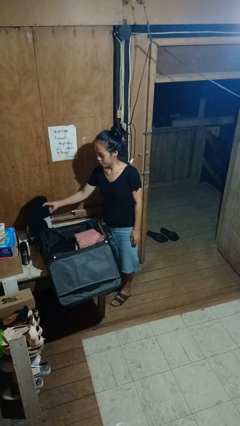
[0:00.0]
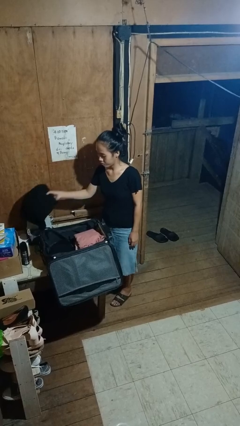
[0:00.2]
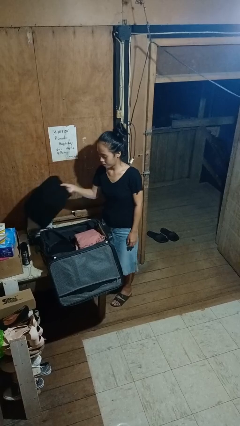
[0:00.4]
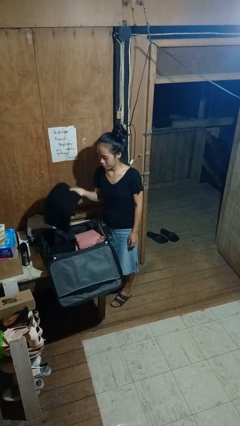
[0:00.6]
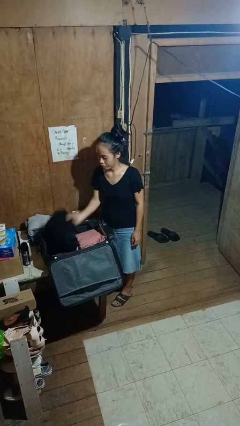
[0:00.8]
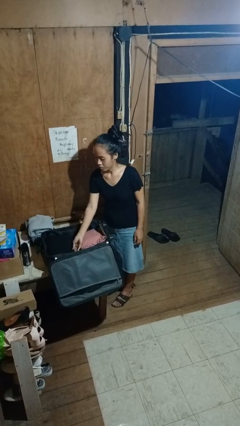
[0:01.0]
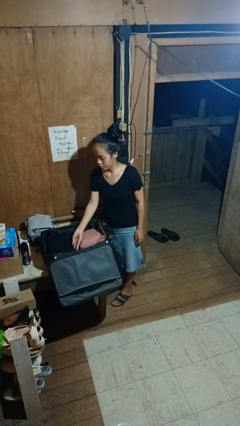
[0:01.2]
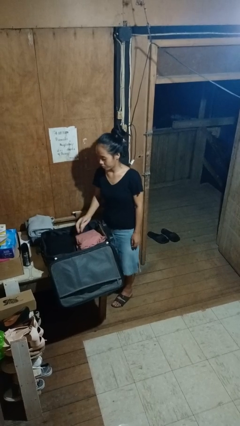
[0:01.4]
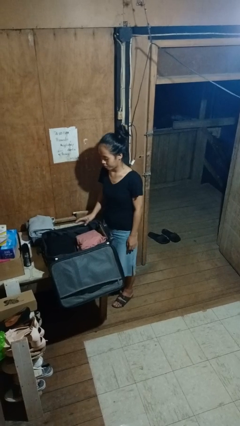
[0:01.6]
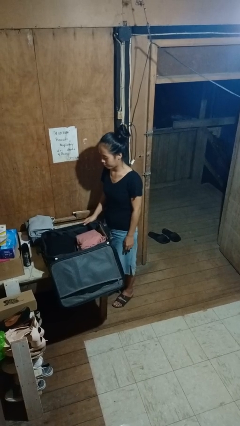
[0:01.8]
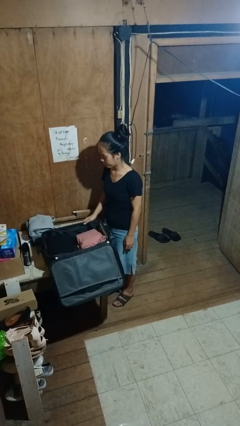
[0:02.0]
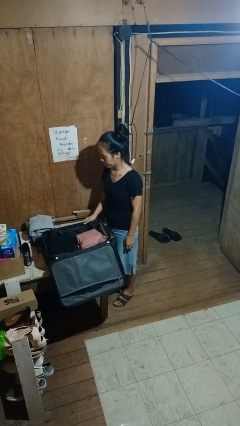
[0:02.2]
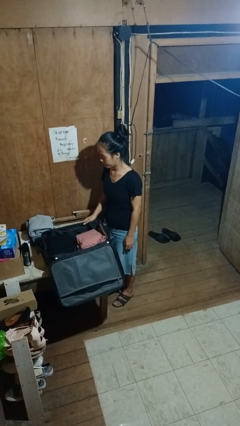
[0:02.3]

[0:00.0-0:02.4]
person loads clothes into suitcase

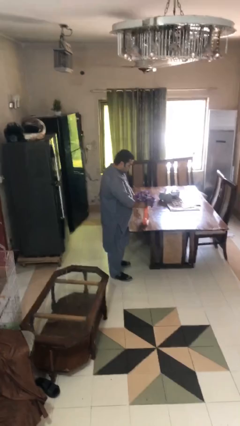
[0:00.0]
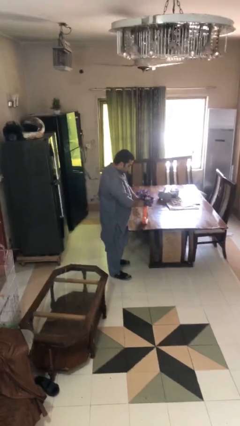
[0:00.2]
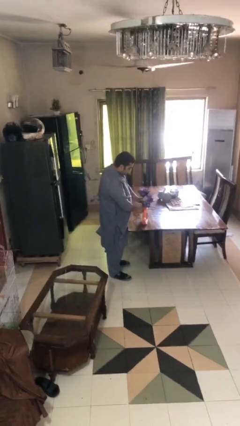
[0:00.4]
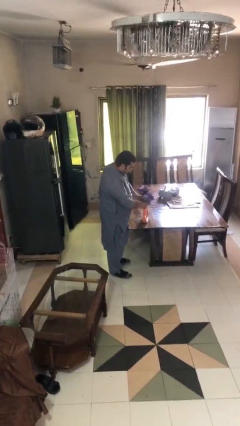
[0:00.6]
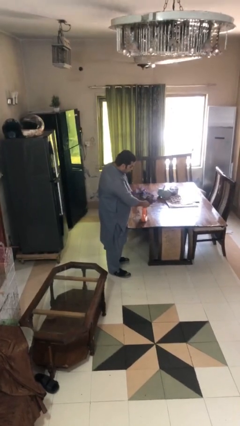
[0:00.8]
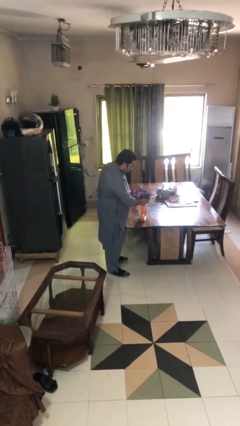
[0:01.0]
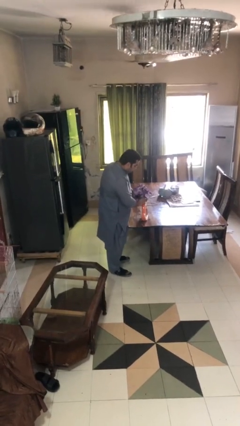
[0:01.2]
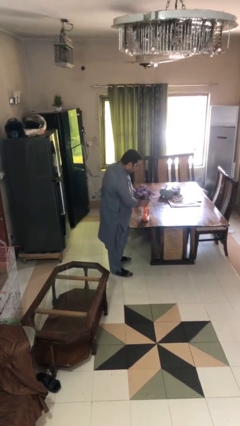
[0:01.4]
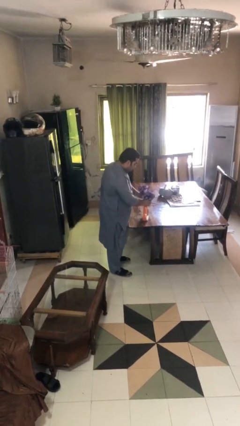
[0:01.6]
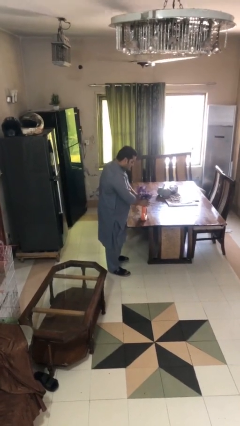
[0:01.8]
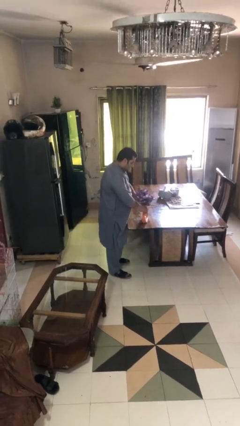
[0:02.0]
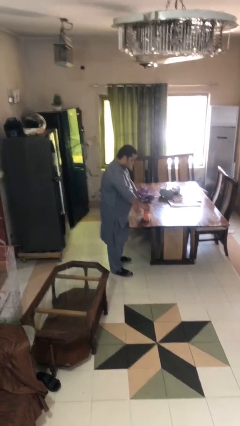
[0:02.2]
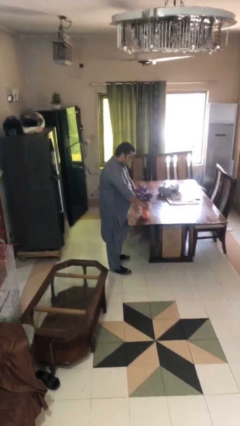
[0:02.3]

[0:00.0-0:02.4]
person arranges flowers in vase

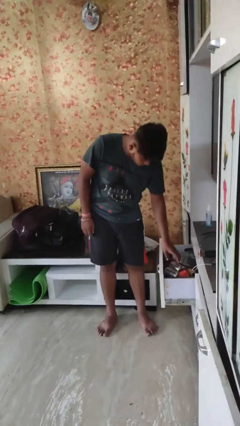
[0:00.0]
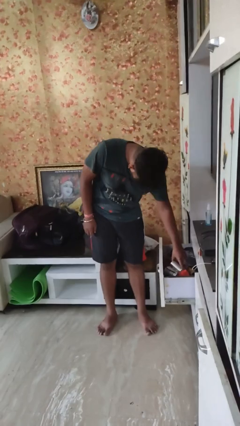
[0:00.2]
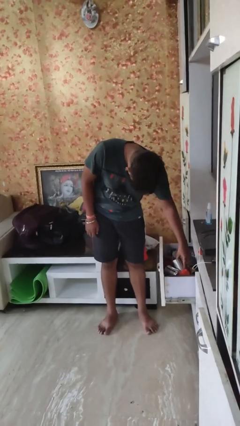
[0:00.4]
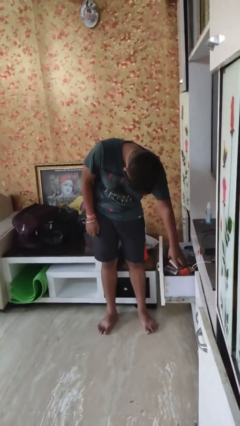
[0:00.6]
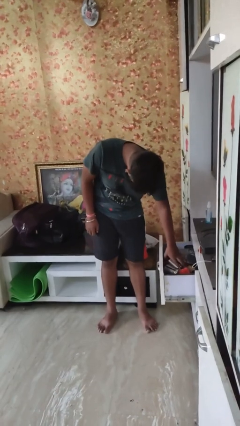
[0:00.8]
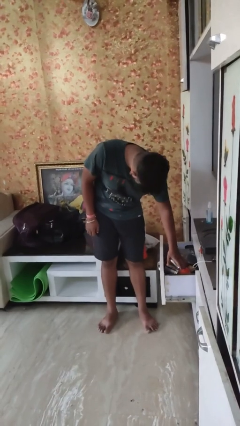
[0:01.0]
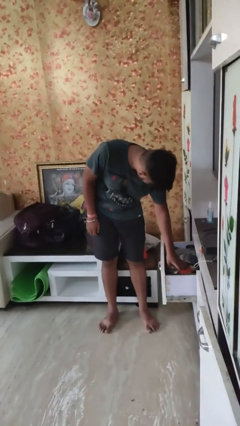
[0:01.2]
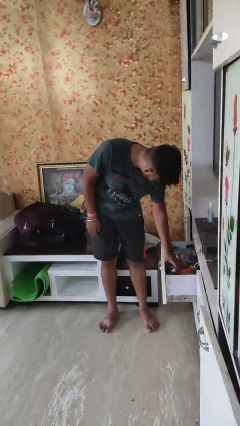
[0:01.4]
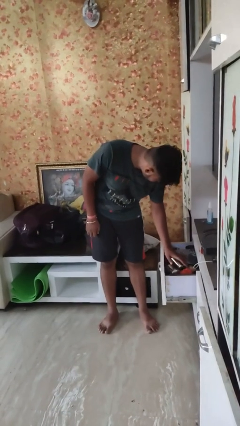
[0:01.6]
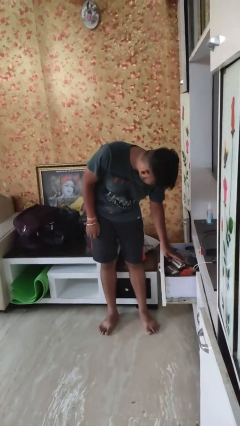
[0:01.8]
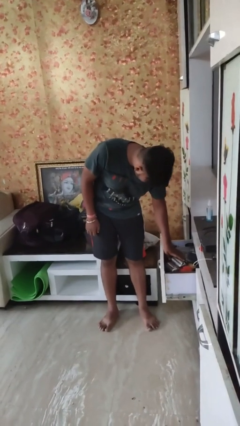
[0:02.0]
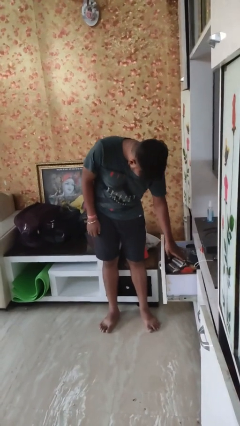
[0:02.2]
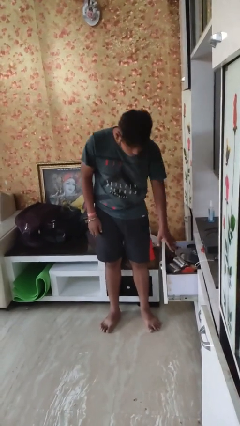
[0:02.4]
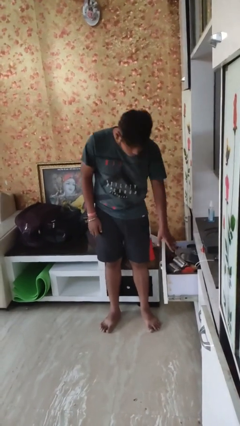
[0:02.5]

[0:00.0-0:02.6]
person searches in kitchen drawer

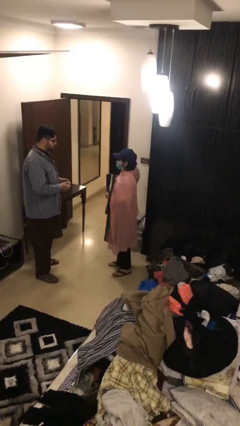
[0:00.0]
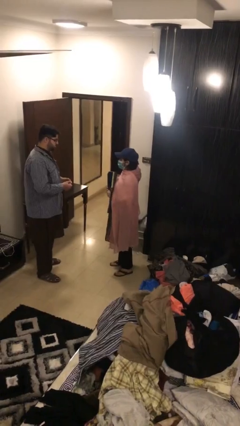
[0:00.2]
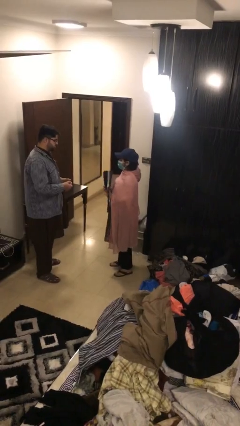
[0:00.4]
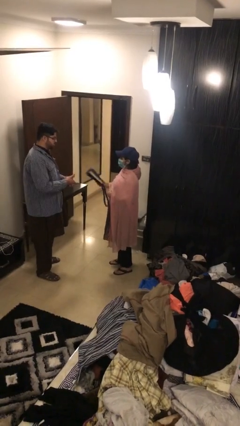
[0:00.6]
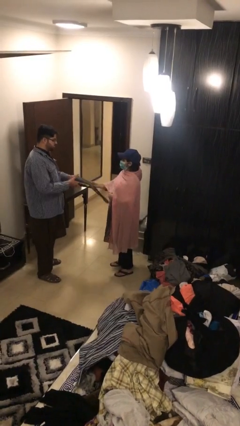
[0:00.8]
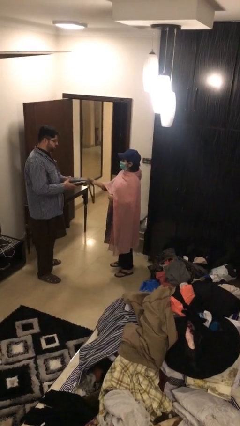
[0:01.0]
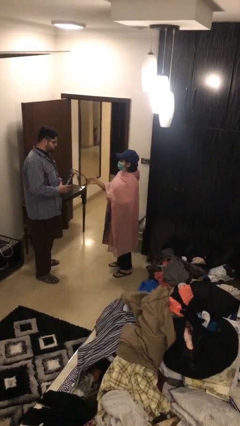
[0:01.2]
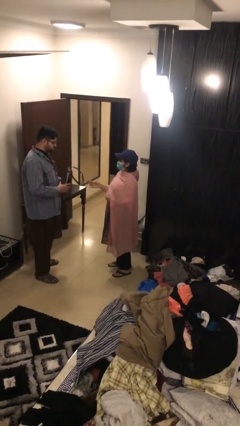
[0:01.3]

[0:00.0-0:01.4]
person transfers object to person

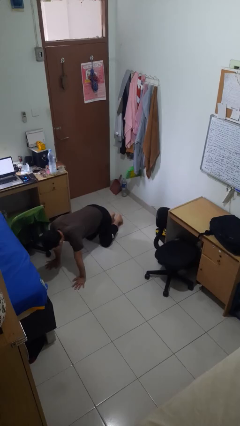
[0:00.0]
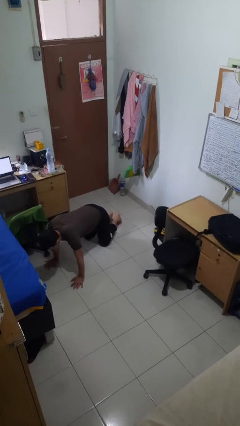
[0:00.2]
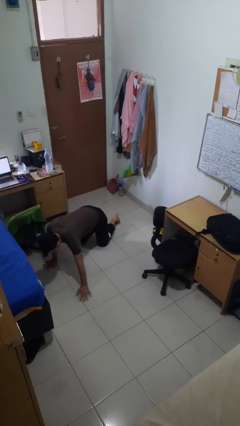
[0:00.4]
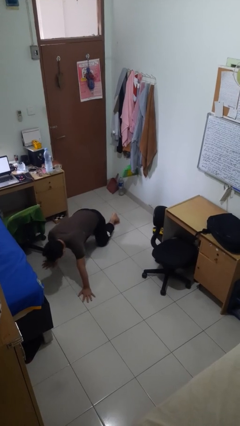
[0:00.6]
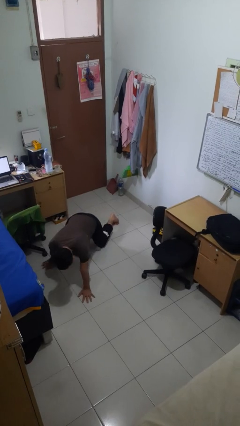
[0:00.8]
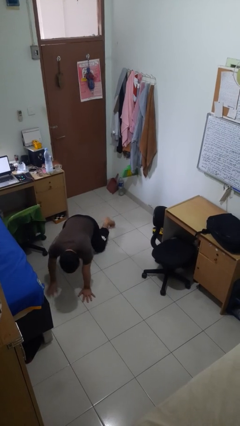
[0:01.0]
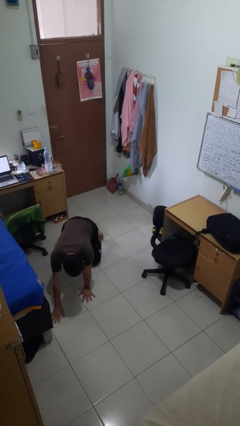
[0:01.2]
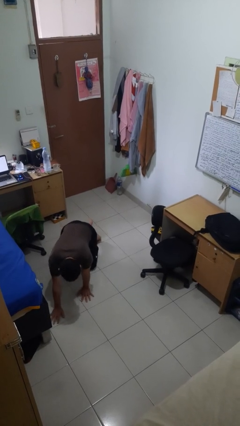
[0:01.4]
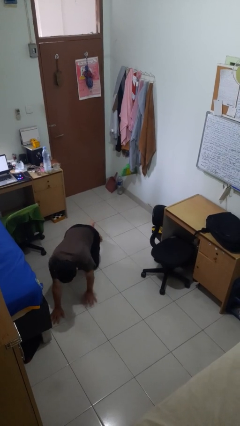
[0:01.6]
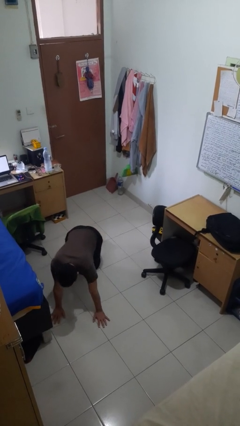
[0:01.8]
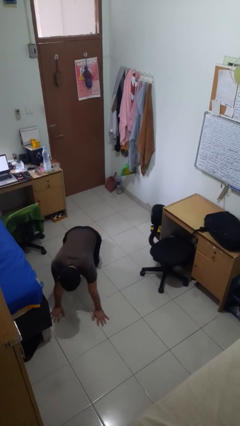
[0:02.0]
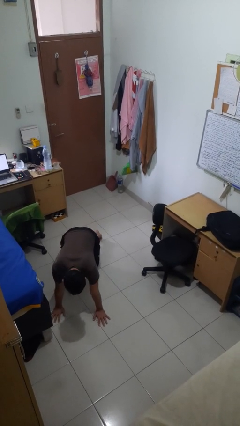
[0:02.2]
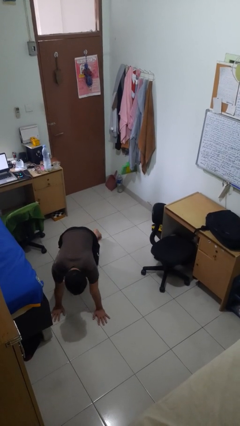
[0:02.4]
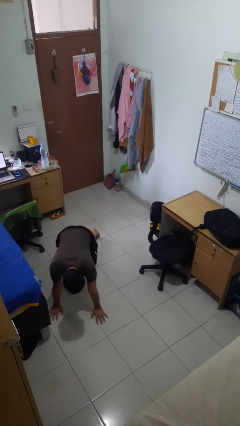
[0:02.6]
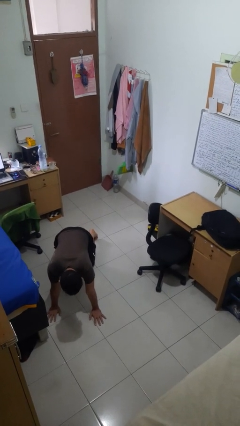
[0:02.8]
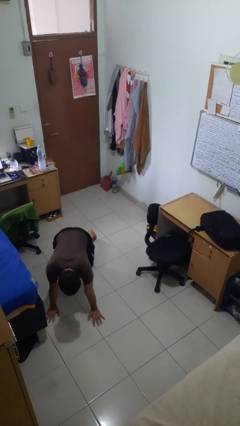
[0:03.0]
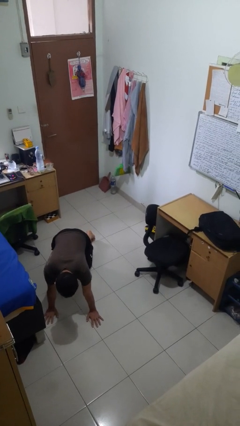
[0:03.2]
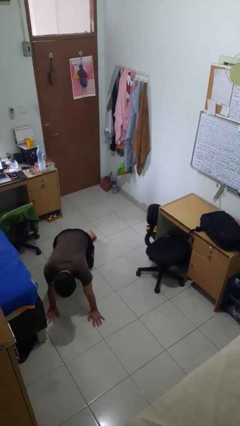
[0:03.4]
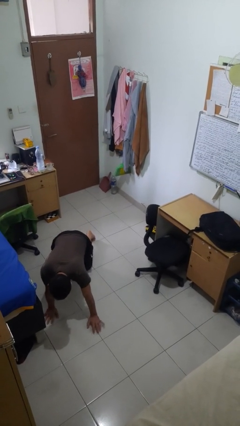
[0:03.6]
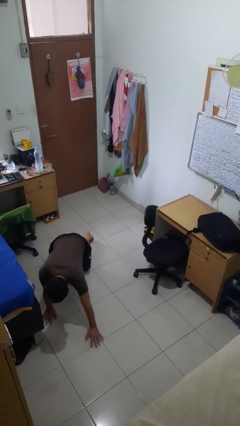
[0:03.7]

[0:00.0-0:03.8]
person crawls

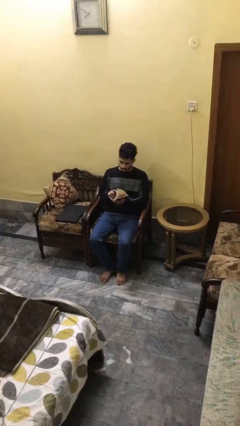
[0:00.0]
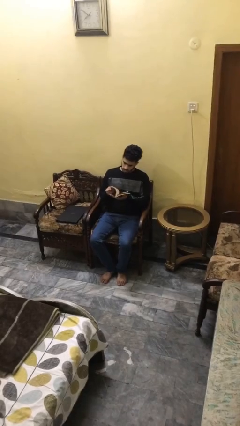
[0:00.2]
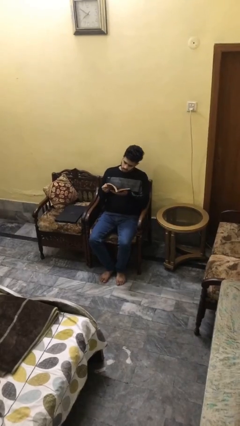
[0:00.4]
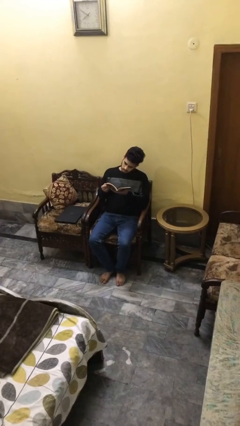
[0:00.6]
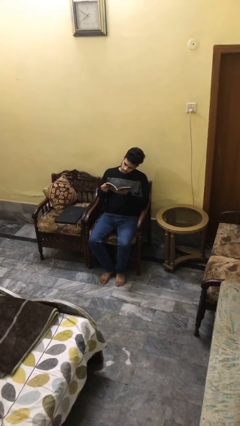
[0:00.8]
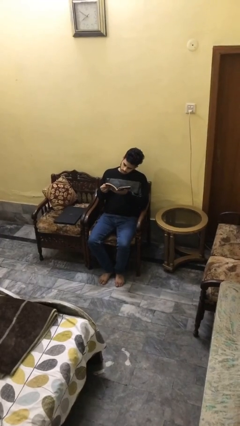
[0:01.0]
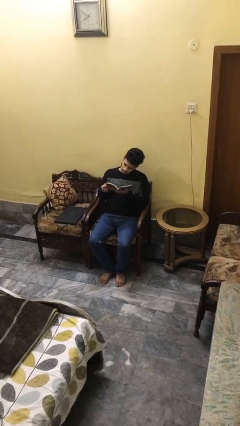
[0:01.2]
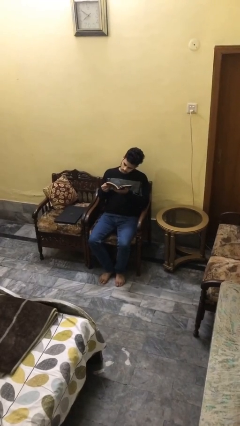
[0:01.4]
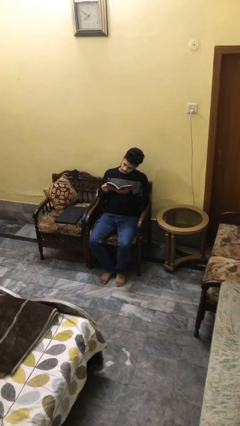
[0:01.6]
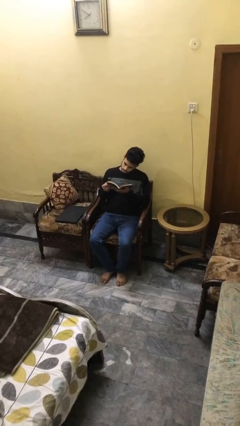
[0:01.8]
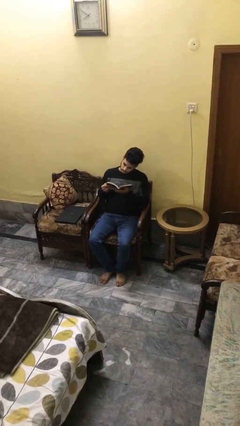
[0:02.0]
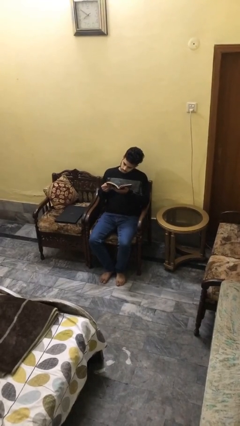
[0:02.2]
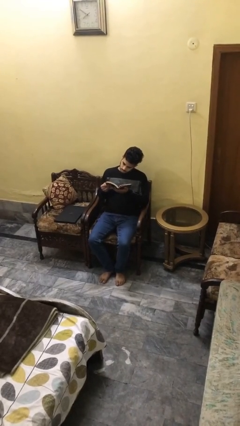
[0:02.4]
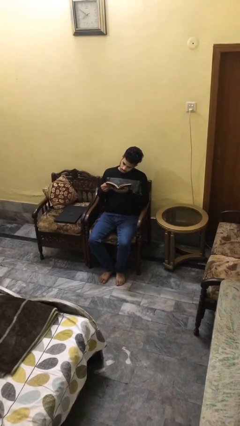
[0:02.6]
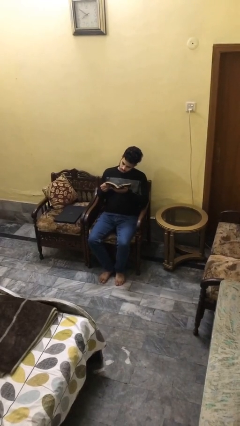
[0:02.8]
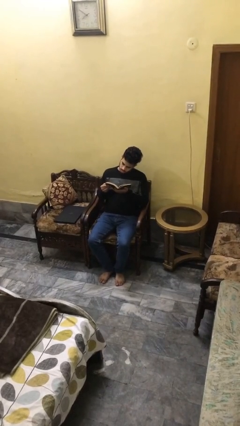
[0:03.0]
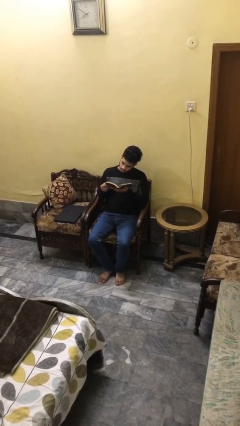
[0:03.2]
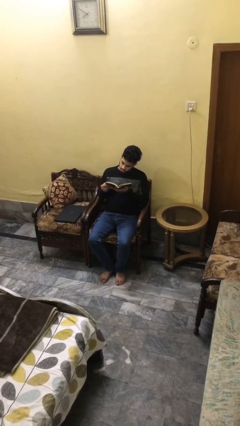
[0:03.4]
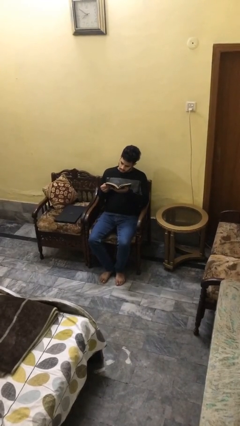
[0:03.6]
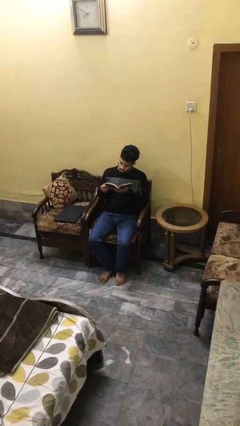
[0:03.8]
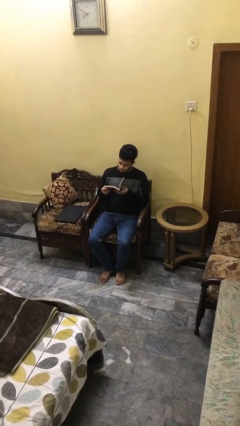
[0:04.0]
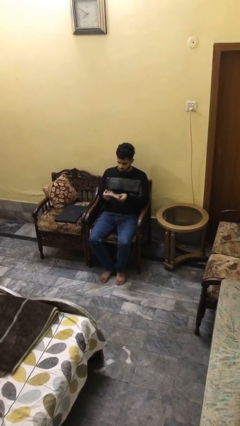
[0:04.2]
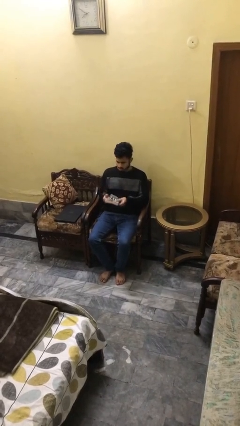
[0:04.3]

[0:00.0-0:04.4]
person reads document

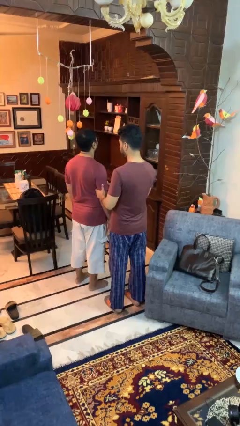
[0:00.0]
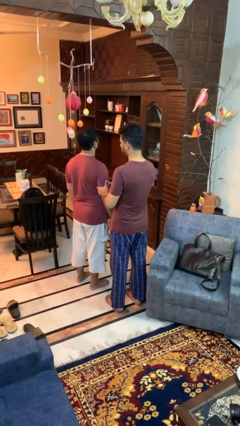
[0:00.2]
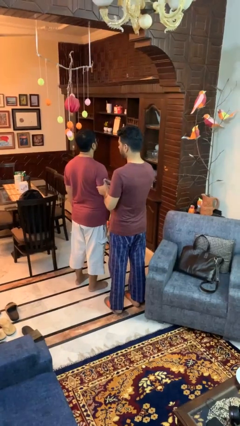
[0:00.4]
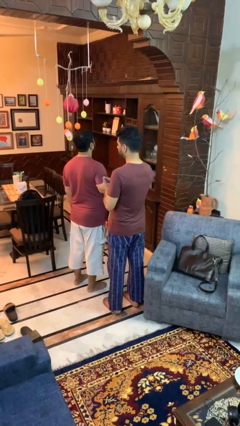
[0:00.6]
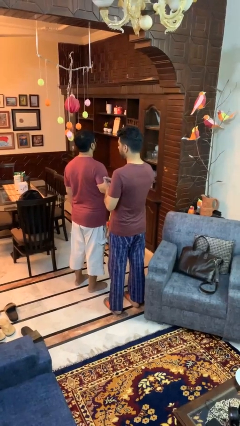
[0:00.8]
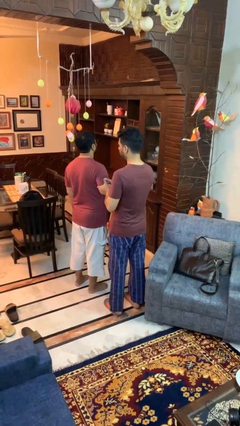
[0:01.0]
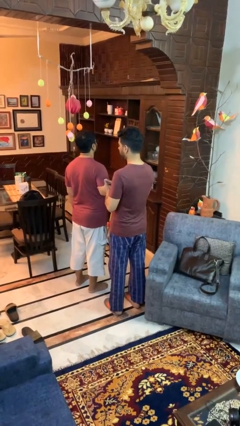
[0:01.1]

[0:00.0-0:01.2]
person grabs person by bicep
